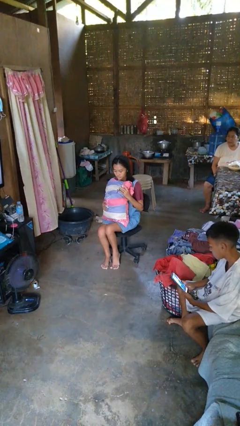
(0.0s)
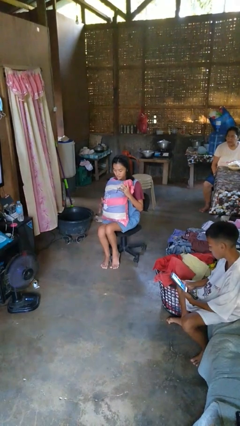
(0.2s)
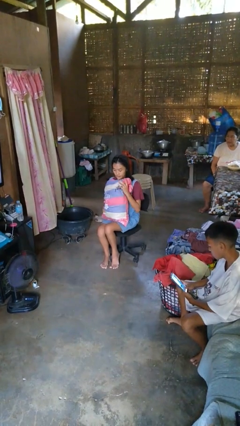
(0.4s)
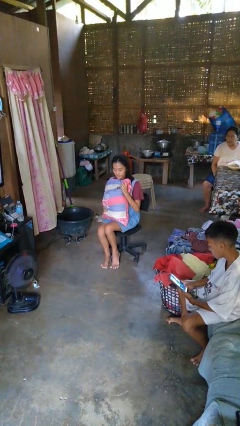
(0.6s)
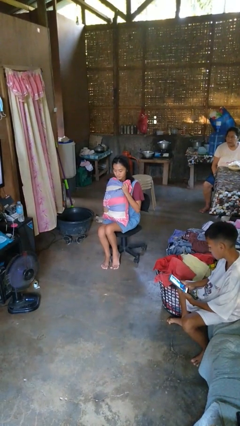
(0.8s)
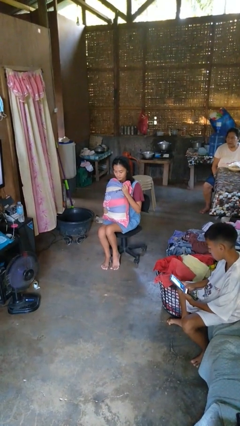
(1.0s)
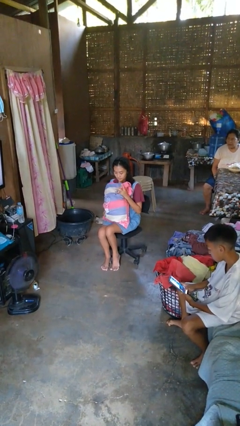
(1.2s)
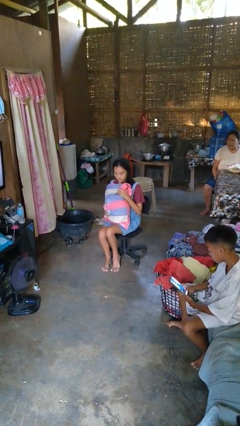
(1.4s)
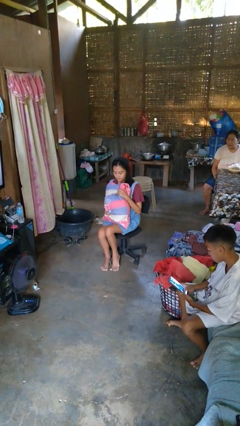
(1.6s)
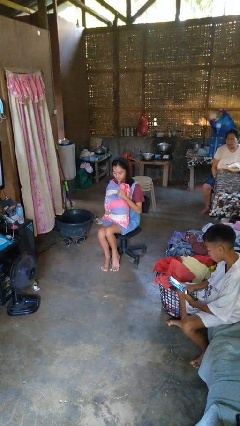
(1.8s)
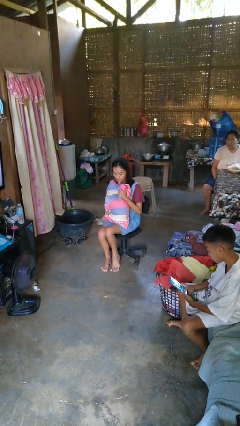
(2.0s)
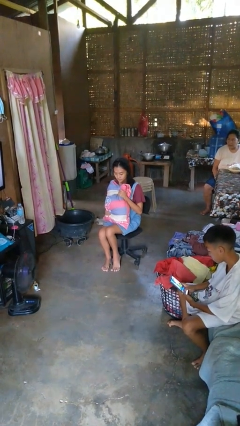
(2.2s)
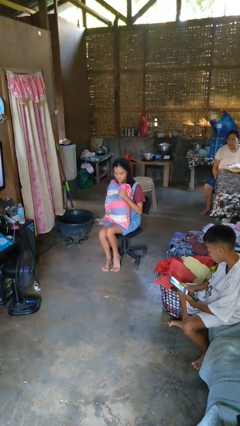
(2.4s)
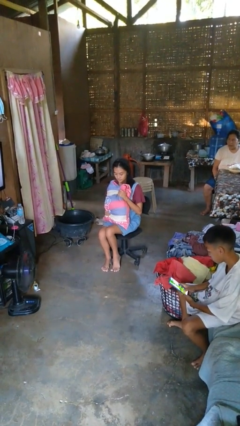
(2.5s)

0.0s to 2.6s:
person squeezes object

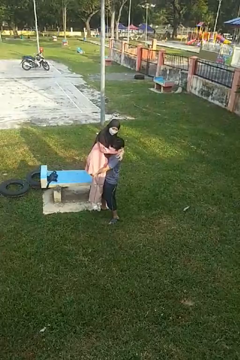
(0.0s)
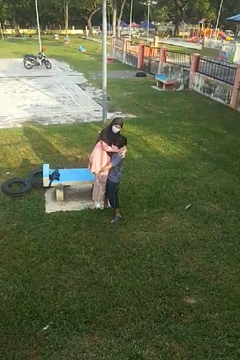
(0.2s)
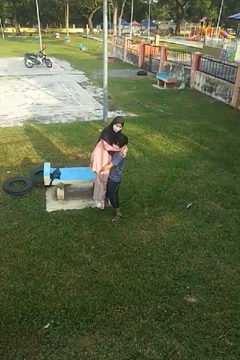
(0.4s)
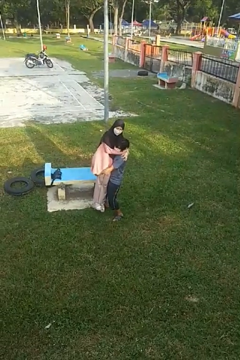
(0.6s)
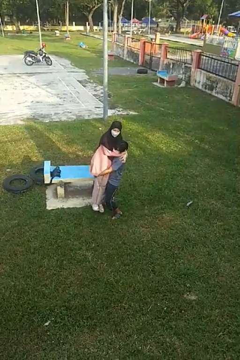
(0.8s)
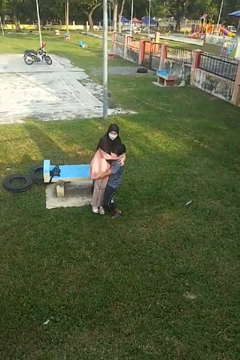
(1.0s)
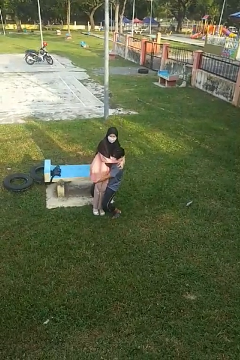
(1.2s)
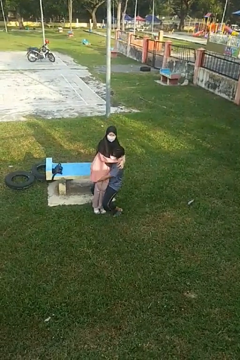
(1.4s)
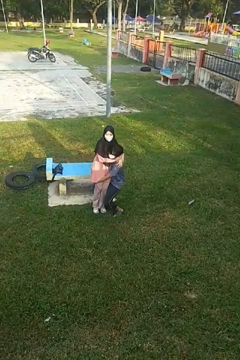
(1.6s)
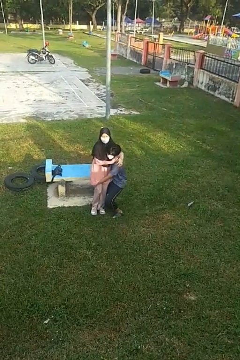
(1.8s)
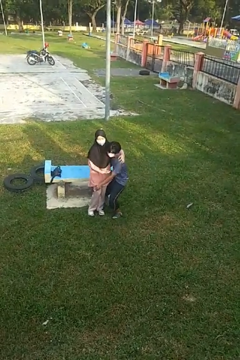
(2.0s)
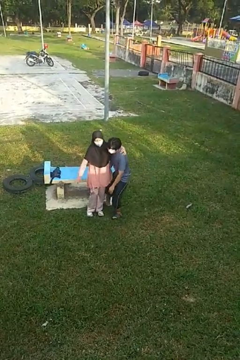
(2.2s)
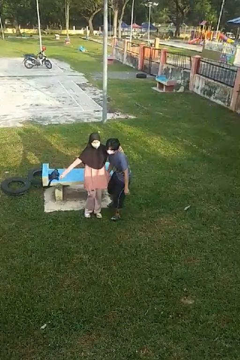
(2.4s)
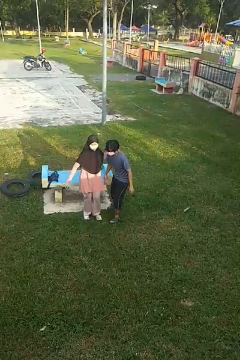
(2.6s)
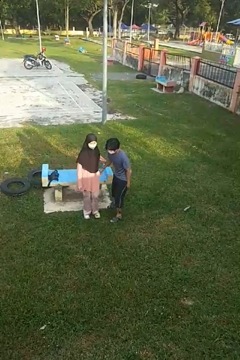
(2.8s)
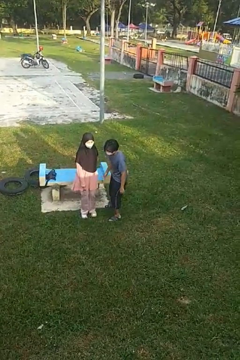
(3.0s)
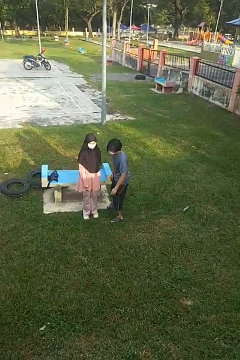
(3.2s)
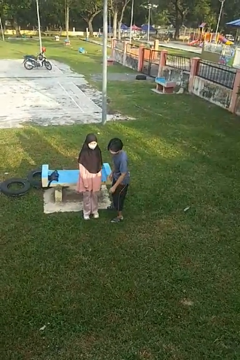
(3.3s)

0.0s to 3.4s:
person puts down person

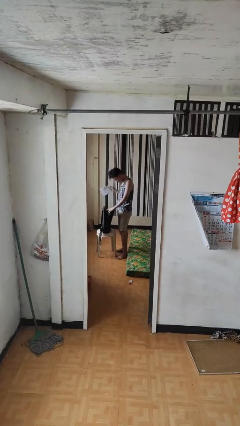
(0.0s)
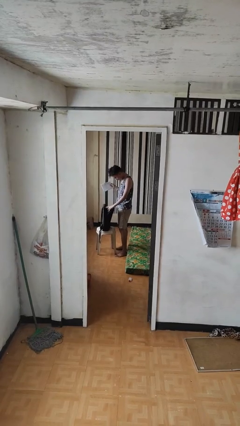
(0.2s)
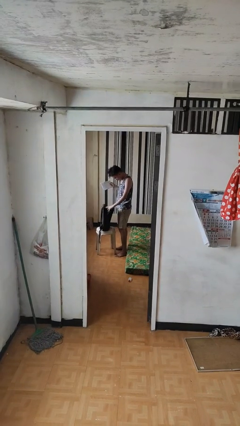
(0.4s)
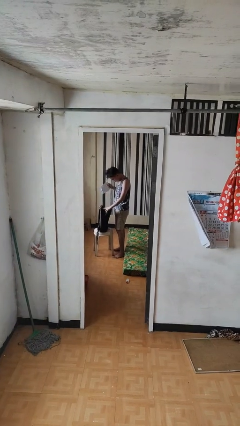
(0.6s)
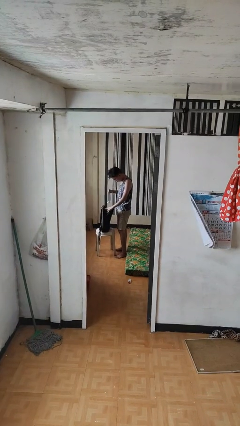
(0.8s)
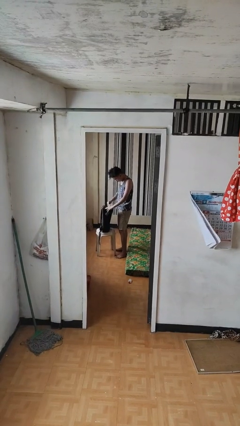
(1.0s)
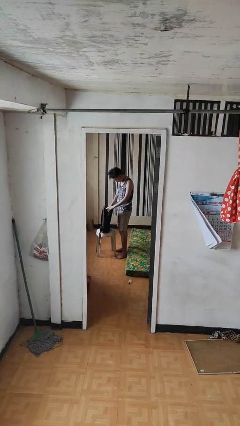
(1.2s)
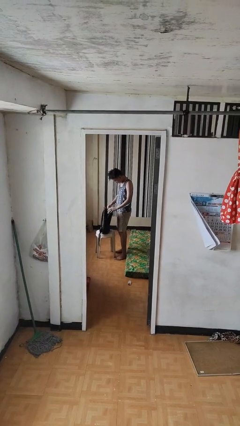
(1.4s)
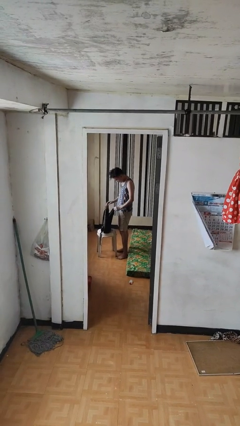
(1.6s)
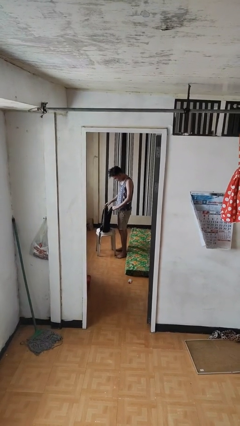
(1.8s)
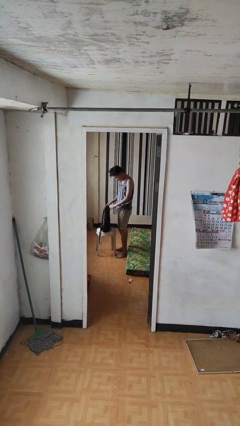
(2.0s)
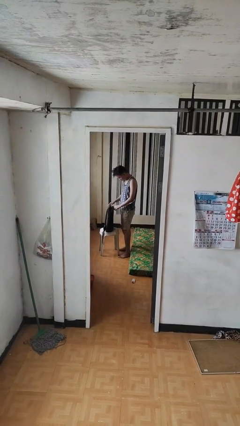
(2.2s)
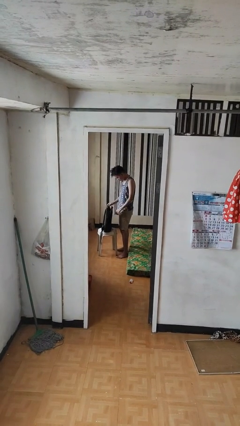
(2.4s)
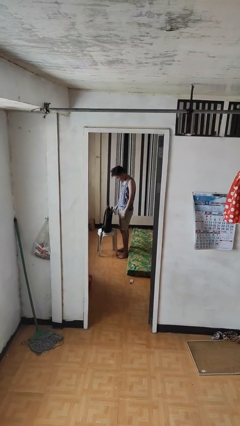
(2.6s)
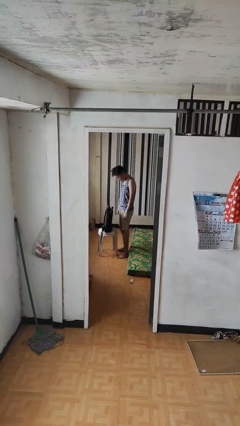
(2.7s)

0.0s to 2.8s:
person puts object into backpack

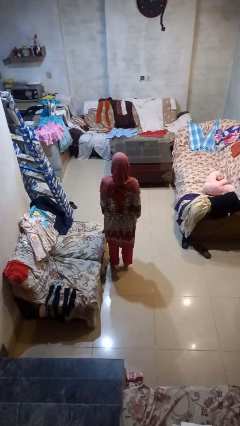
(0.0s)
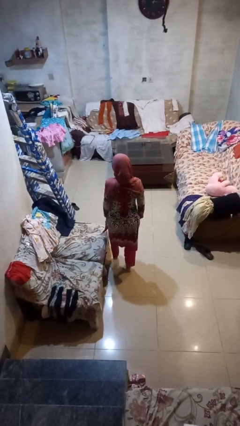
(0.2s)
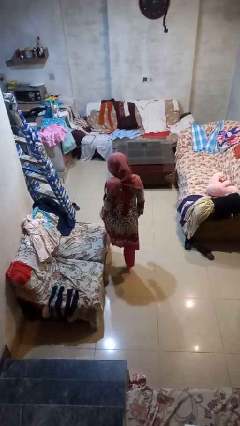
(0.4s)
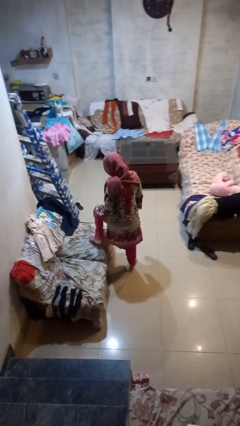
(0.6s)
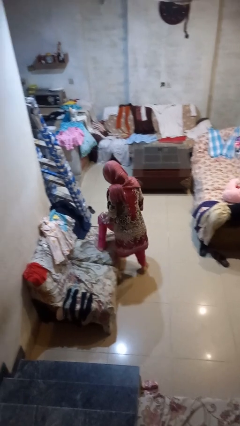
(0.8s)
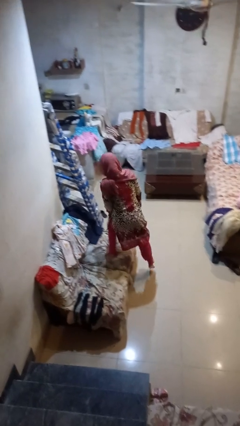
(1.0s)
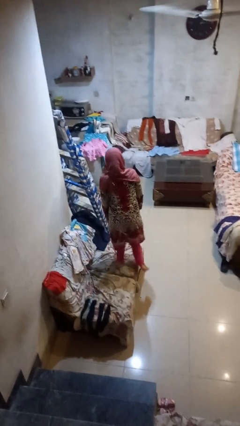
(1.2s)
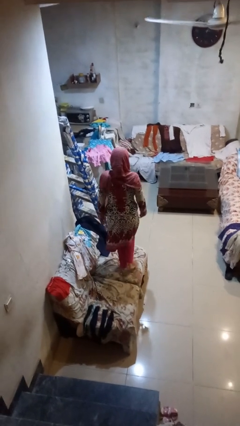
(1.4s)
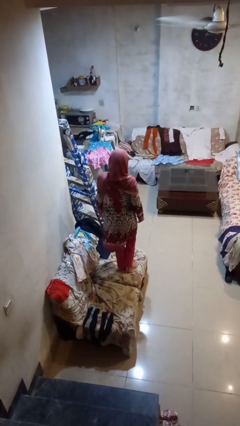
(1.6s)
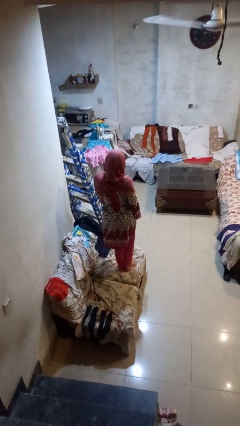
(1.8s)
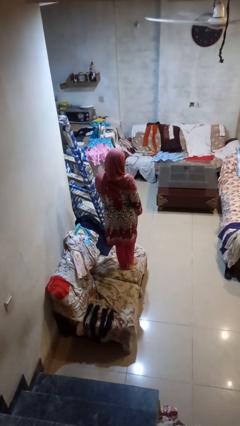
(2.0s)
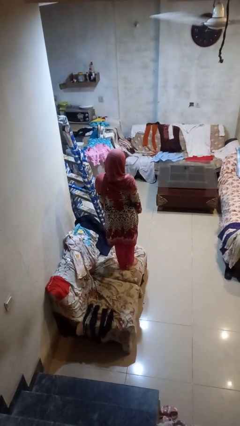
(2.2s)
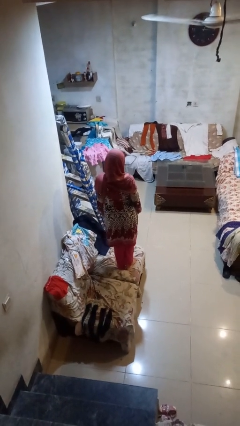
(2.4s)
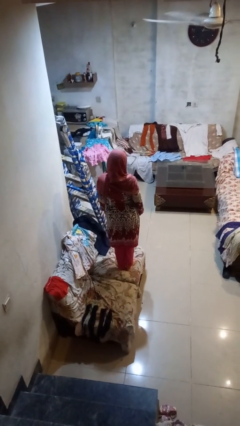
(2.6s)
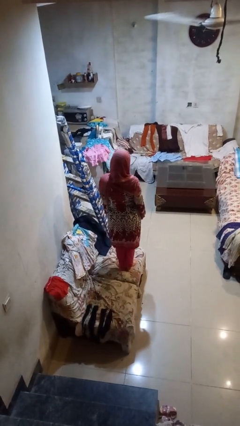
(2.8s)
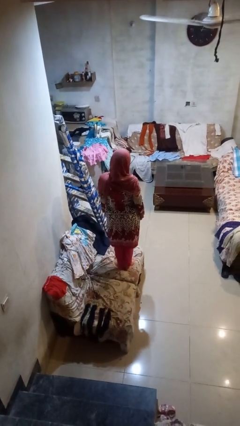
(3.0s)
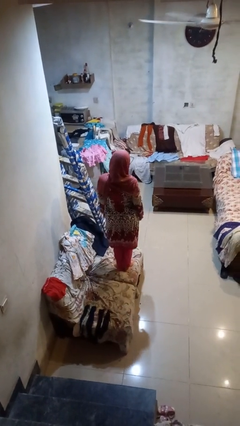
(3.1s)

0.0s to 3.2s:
person climbs on couch

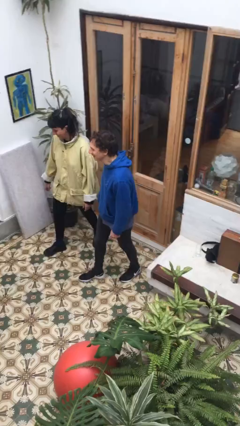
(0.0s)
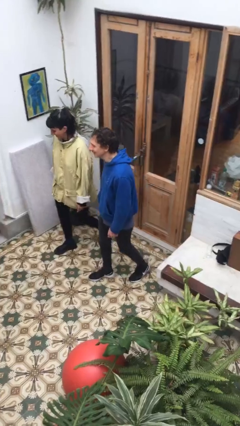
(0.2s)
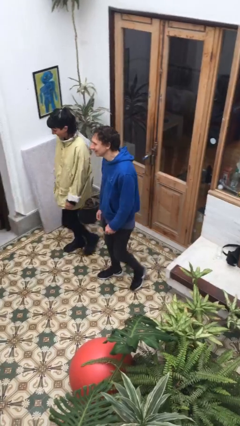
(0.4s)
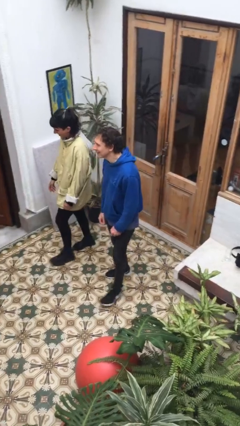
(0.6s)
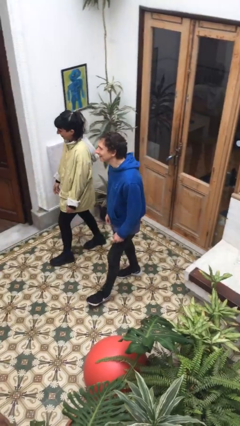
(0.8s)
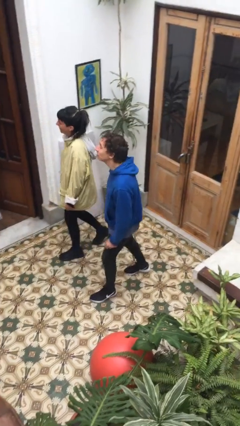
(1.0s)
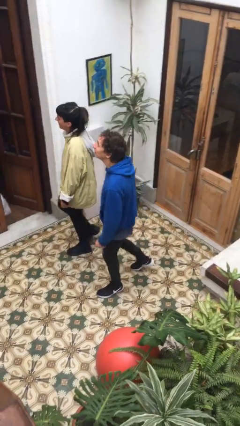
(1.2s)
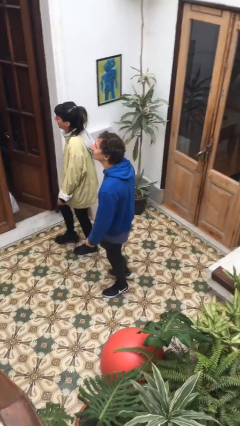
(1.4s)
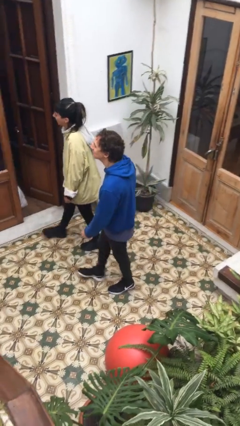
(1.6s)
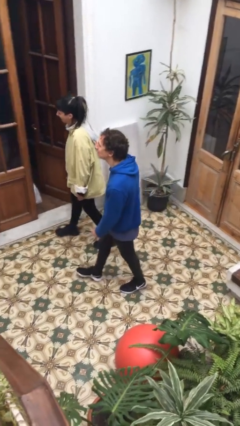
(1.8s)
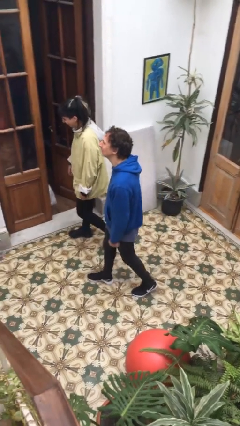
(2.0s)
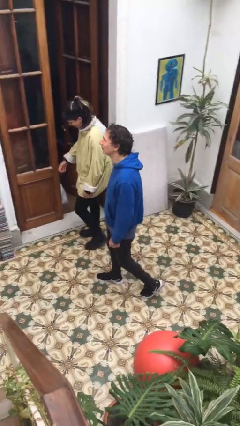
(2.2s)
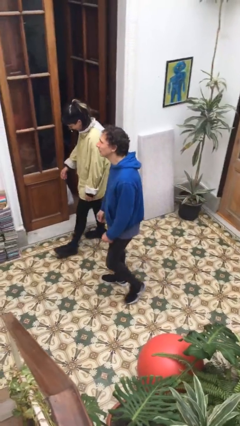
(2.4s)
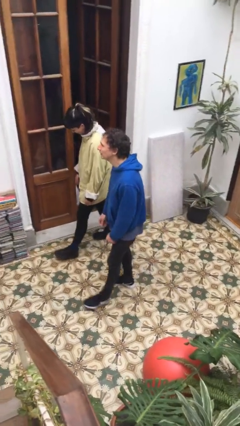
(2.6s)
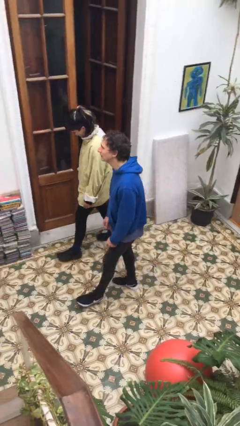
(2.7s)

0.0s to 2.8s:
person talks to person

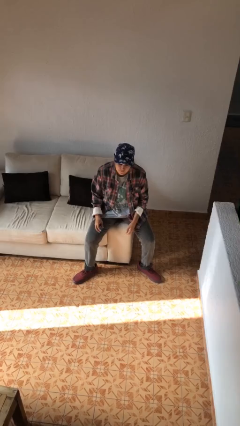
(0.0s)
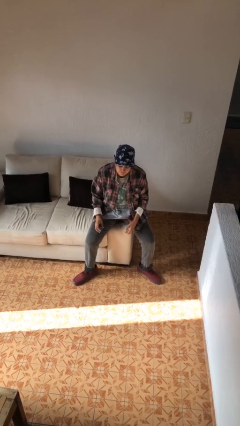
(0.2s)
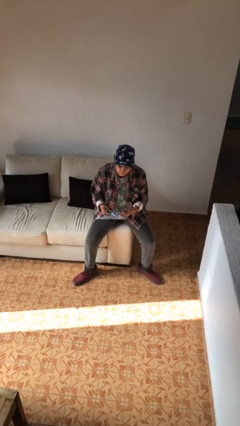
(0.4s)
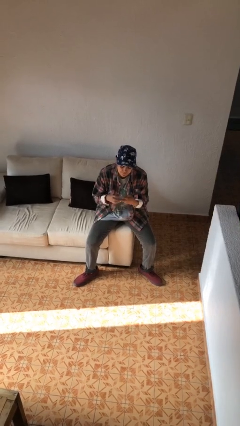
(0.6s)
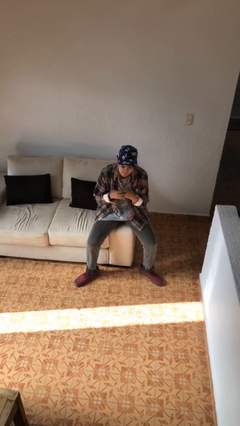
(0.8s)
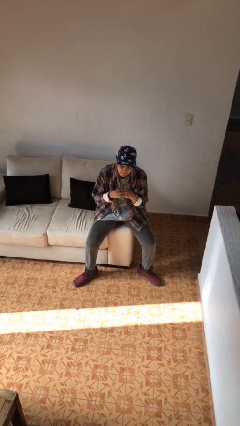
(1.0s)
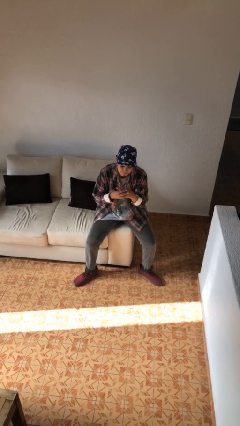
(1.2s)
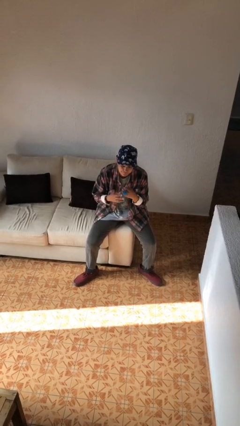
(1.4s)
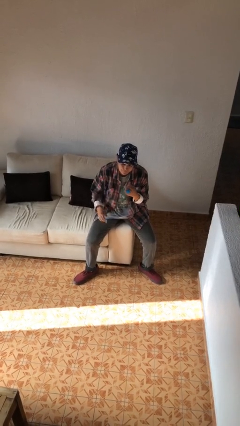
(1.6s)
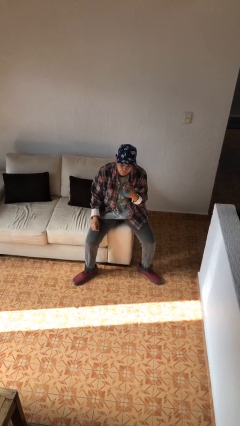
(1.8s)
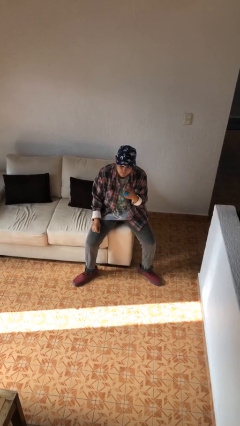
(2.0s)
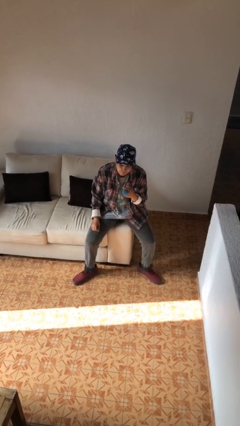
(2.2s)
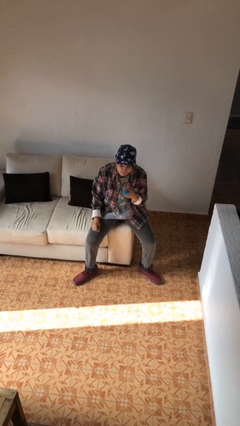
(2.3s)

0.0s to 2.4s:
person puts on ring

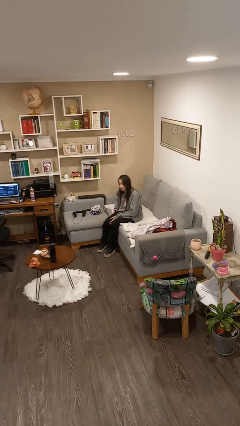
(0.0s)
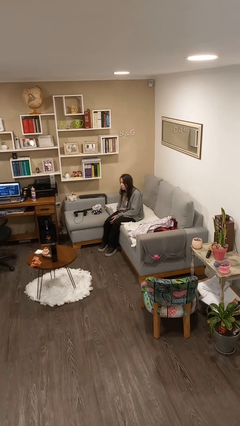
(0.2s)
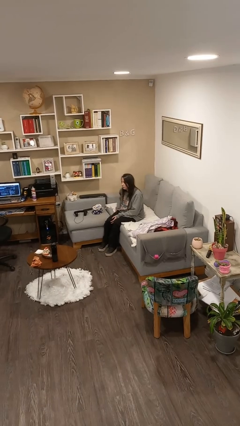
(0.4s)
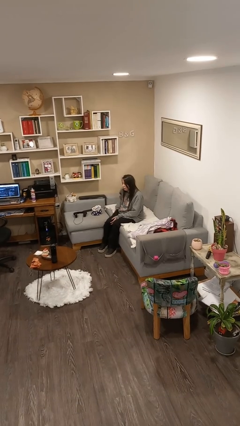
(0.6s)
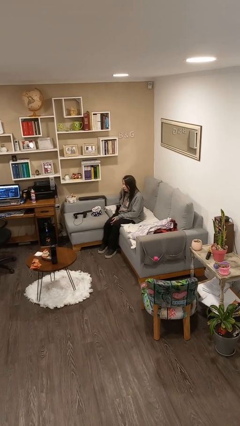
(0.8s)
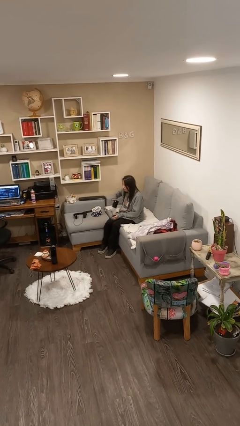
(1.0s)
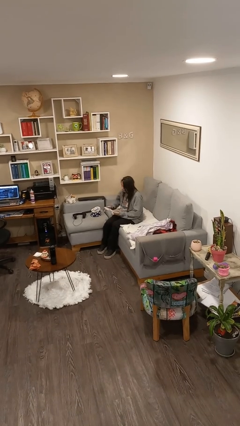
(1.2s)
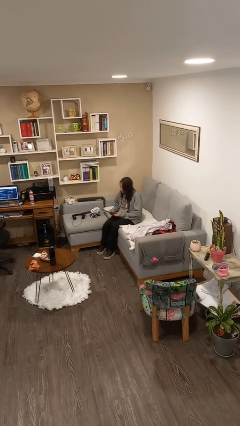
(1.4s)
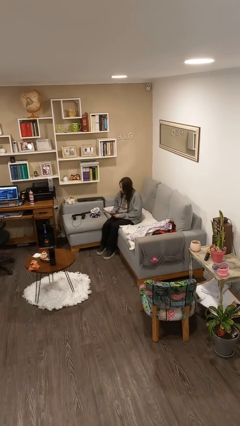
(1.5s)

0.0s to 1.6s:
person takes phone from pocket
